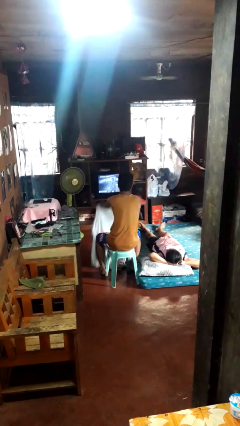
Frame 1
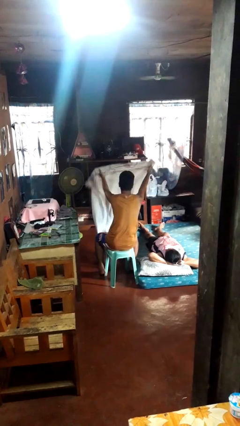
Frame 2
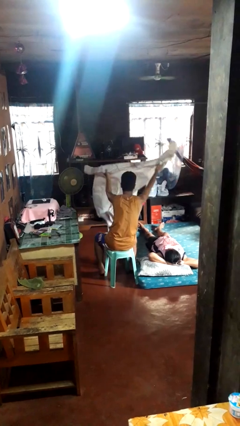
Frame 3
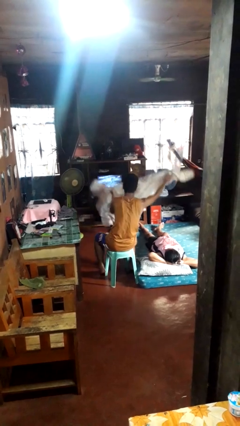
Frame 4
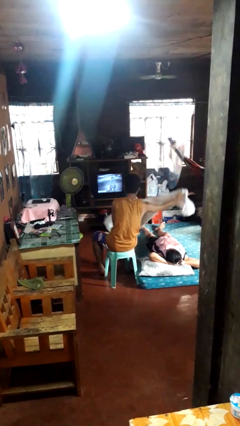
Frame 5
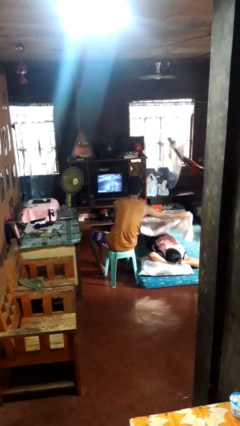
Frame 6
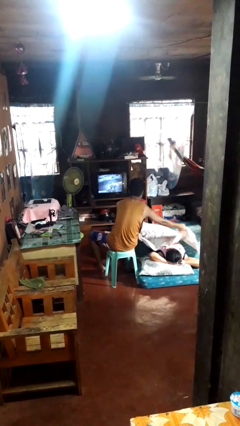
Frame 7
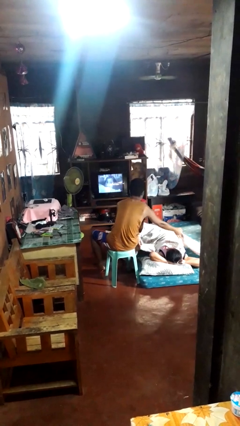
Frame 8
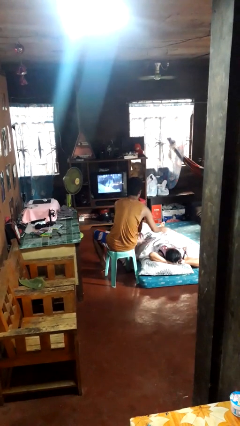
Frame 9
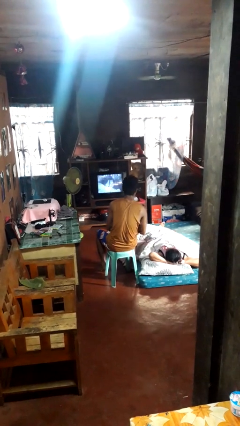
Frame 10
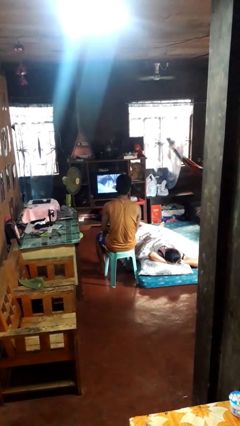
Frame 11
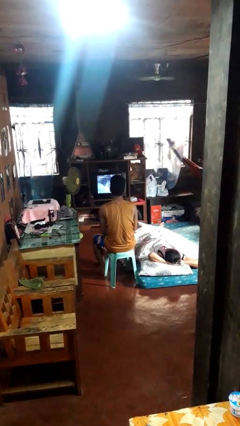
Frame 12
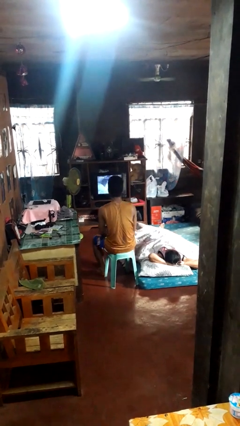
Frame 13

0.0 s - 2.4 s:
person covers friend with blanket

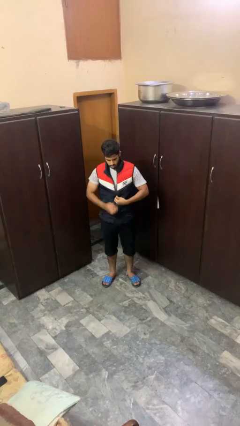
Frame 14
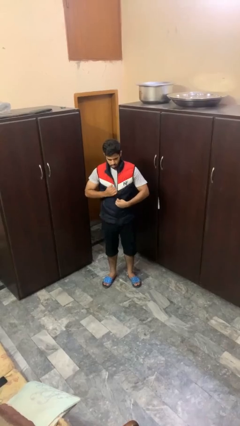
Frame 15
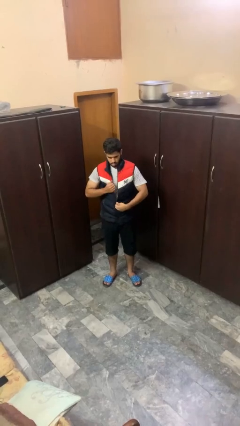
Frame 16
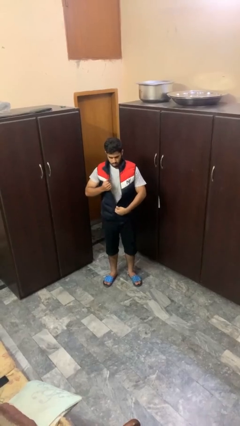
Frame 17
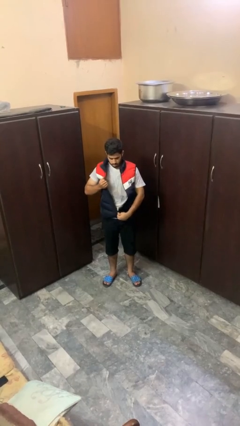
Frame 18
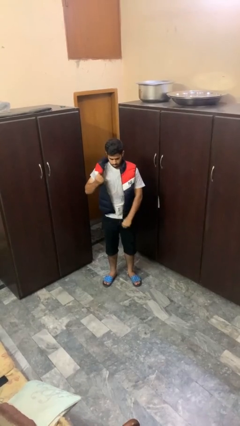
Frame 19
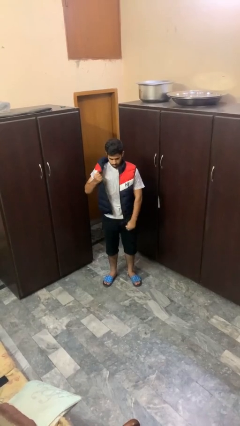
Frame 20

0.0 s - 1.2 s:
person unzips jacket

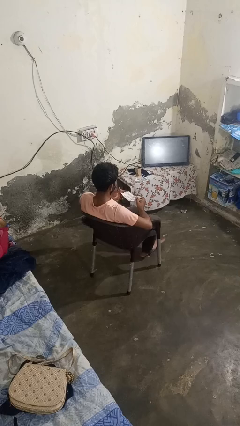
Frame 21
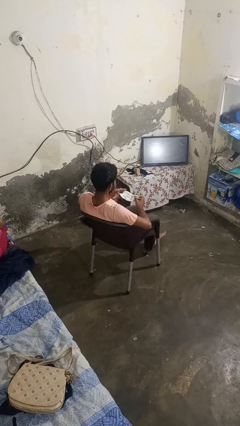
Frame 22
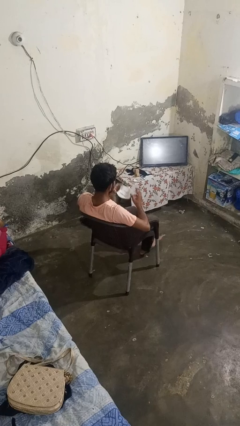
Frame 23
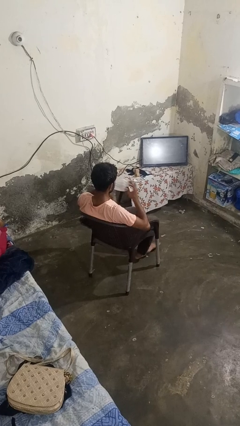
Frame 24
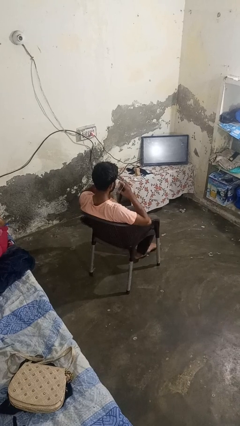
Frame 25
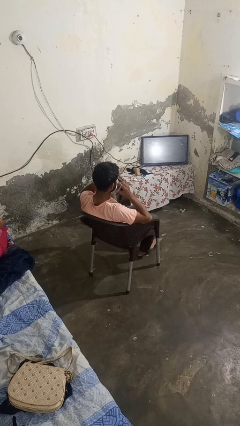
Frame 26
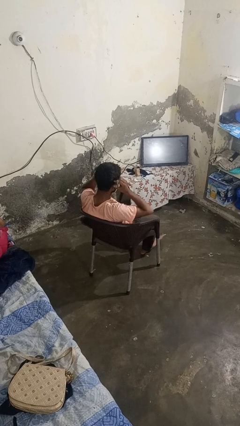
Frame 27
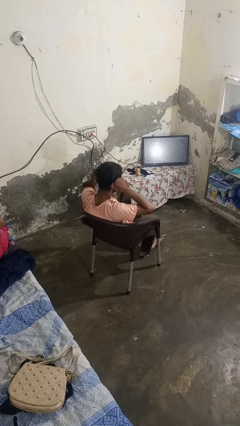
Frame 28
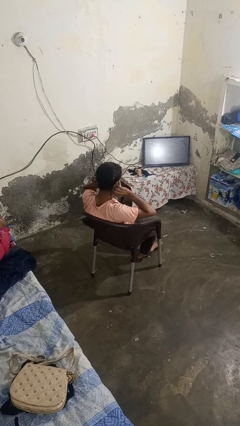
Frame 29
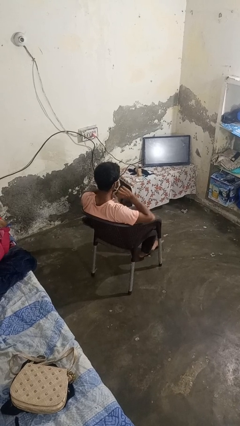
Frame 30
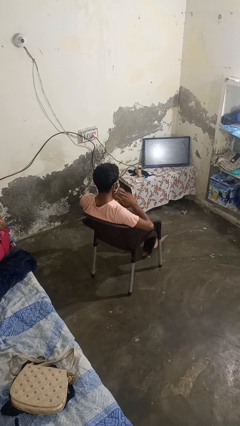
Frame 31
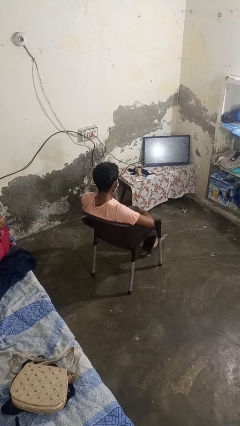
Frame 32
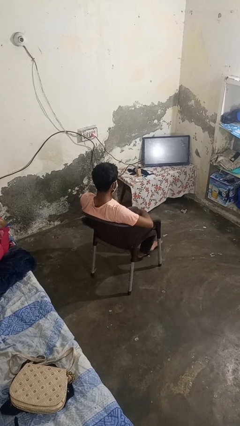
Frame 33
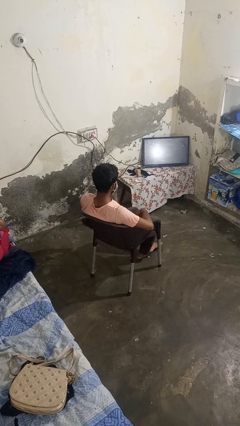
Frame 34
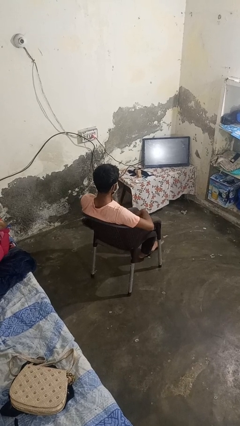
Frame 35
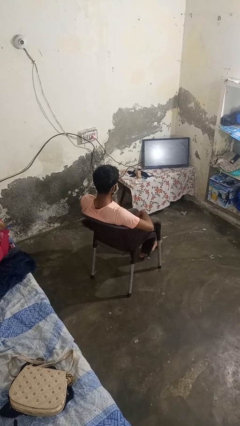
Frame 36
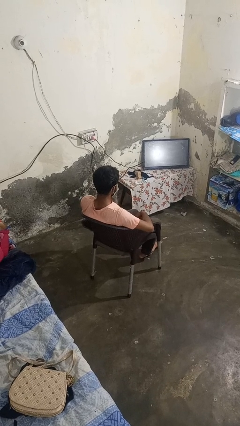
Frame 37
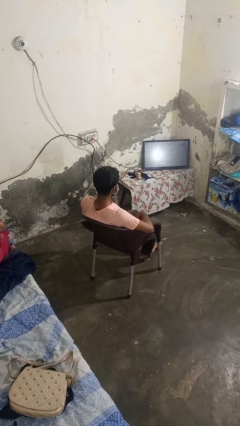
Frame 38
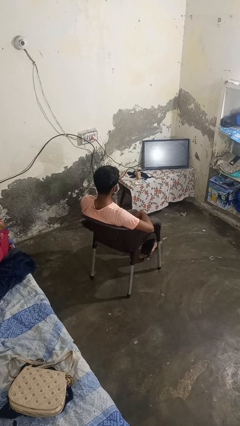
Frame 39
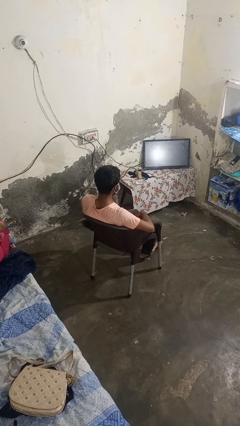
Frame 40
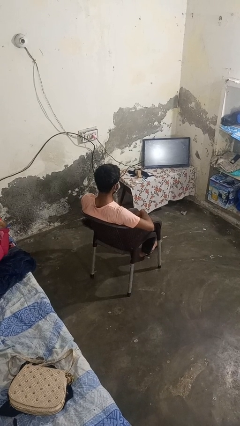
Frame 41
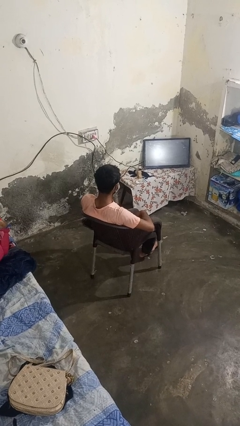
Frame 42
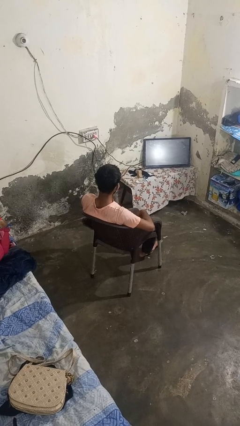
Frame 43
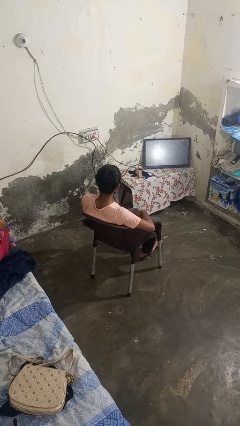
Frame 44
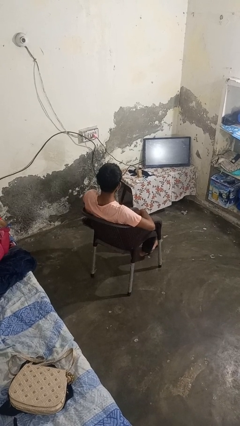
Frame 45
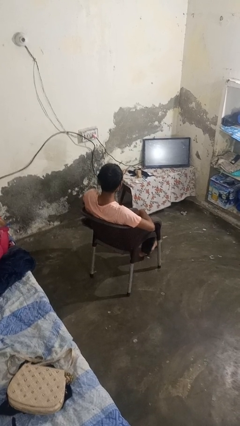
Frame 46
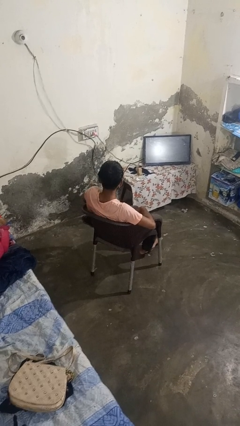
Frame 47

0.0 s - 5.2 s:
person puts on facemask

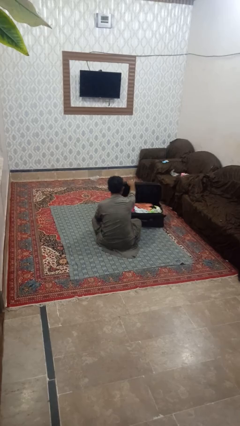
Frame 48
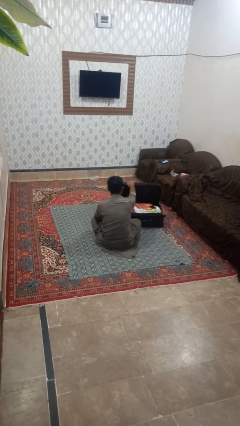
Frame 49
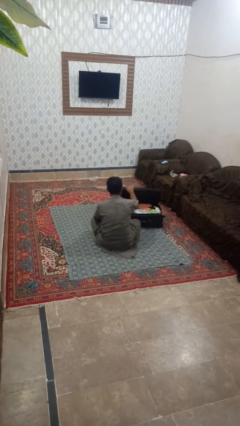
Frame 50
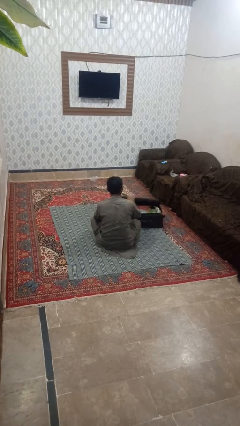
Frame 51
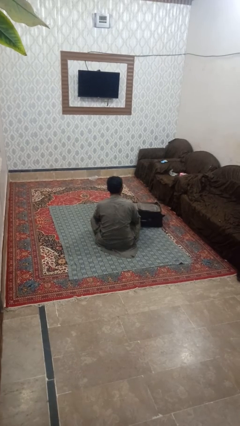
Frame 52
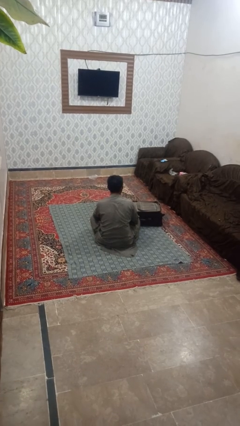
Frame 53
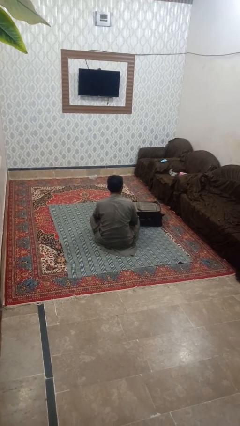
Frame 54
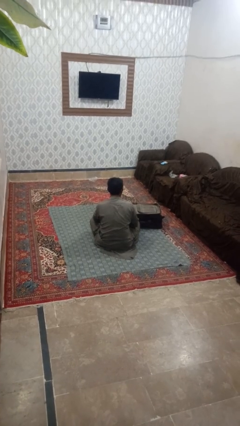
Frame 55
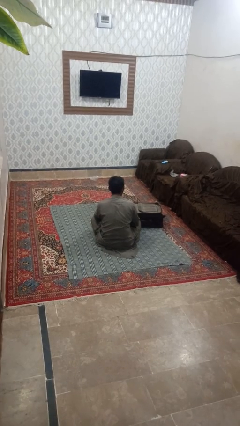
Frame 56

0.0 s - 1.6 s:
person closes suitcase

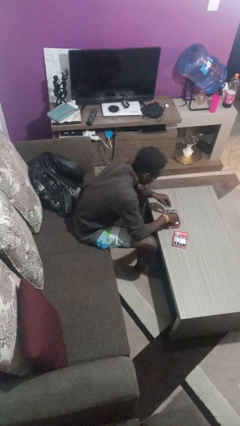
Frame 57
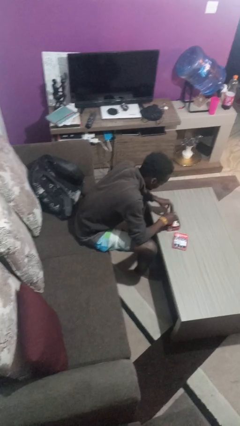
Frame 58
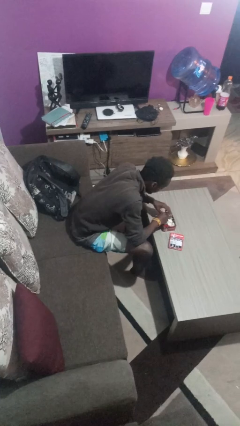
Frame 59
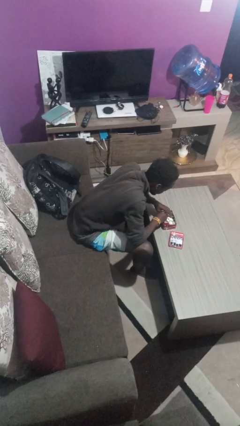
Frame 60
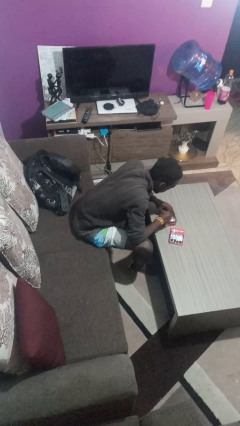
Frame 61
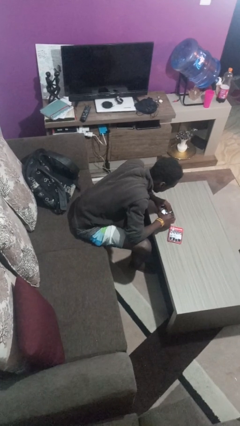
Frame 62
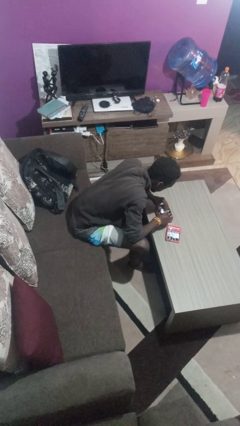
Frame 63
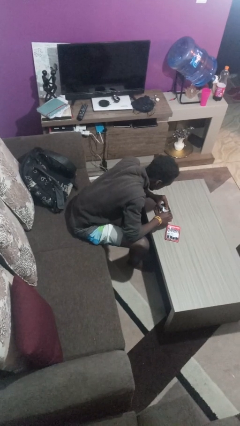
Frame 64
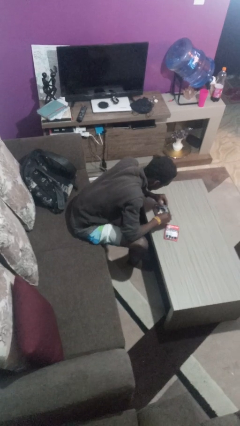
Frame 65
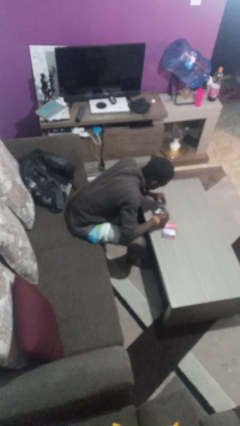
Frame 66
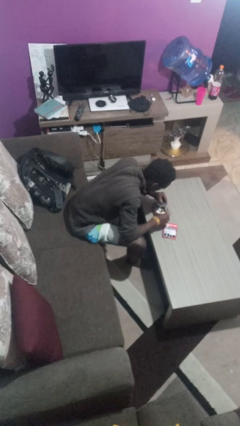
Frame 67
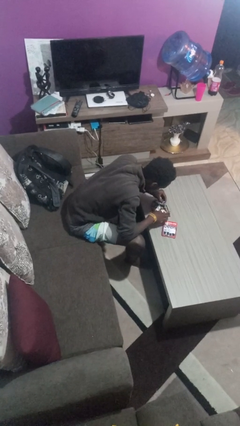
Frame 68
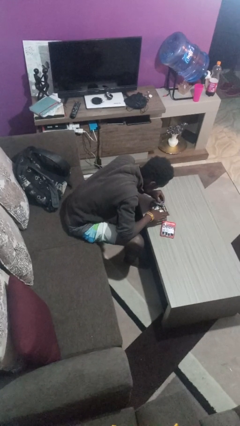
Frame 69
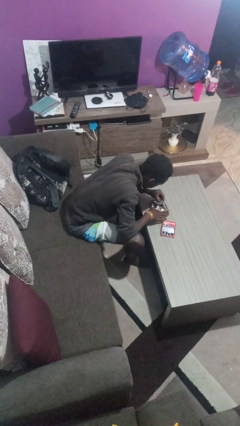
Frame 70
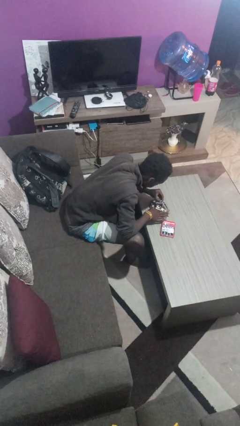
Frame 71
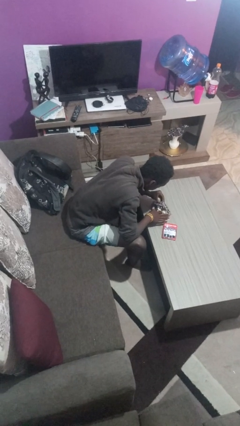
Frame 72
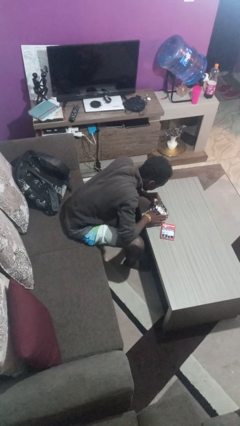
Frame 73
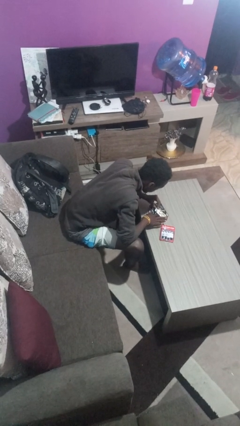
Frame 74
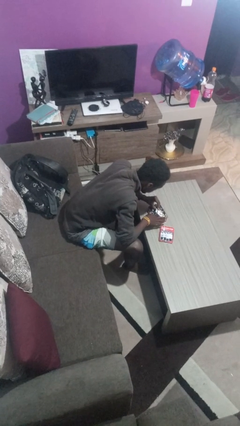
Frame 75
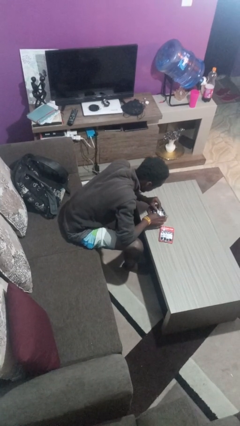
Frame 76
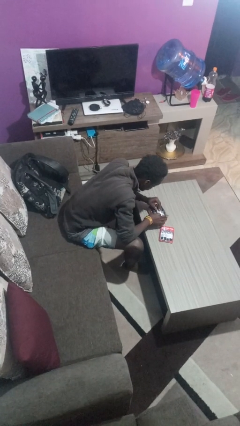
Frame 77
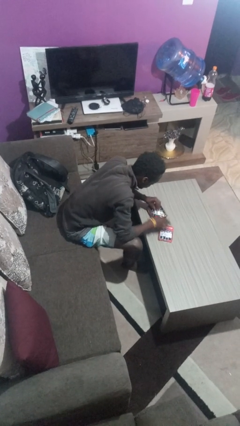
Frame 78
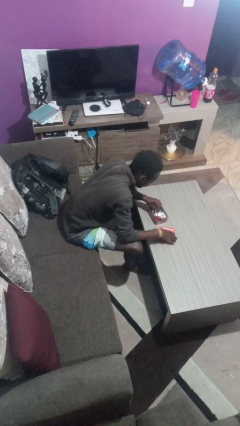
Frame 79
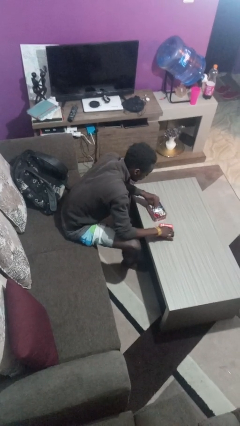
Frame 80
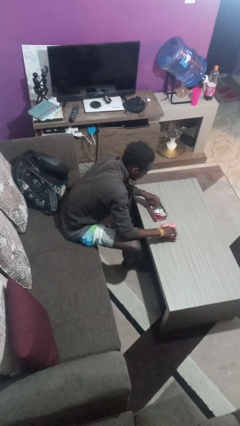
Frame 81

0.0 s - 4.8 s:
person searches jewelry box

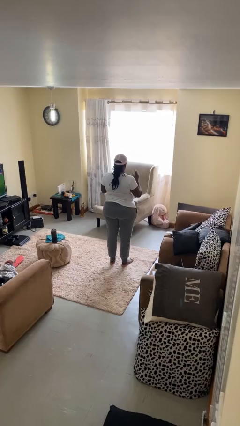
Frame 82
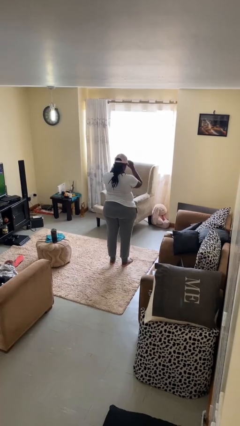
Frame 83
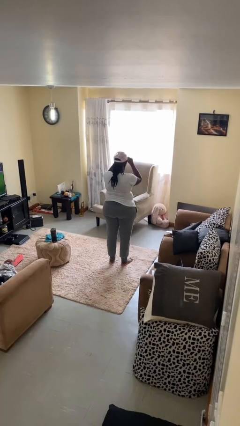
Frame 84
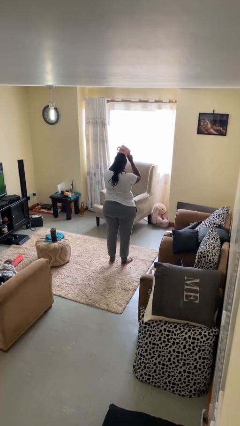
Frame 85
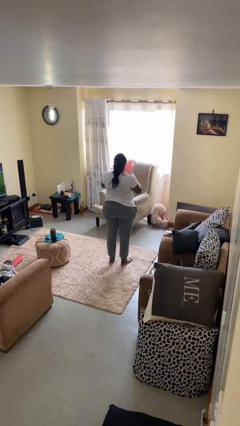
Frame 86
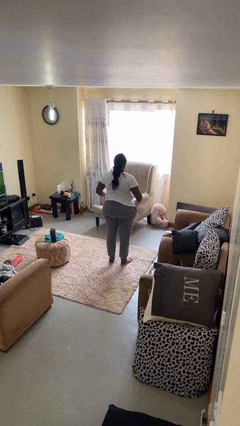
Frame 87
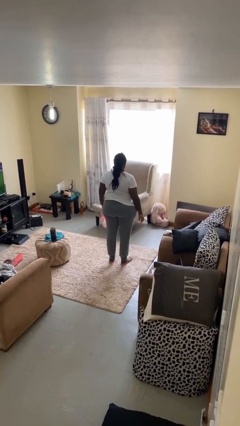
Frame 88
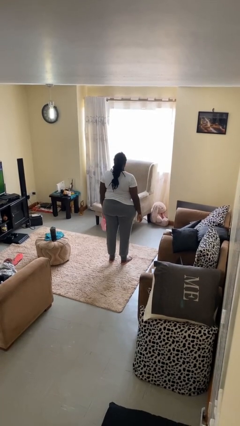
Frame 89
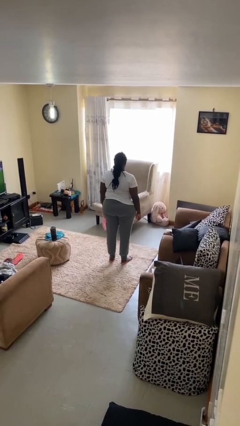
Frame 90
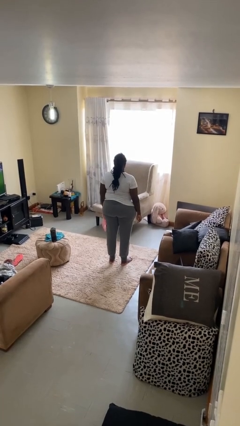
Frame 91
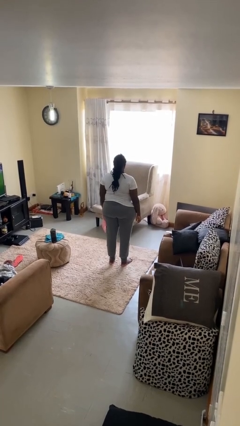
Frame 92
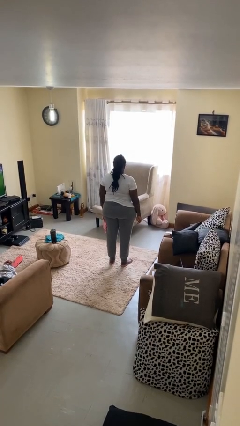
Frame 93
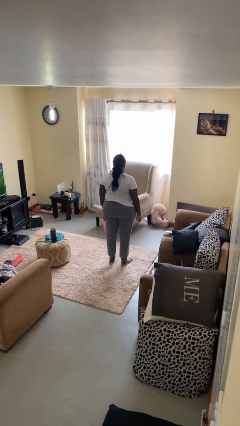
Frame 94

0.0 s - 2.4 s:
person takes off hat
